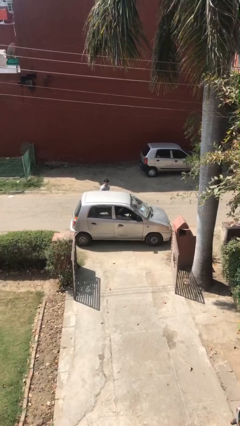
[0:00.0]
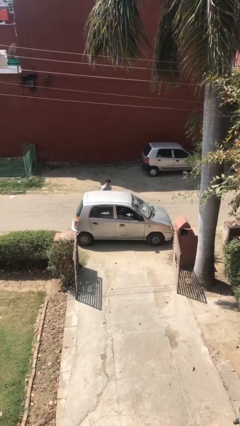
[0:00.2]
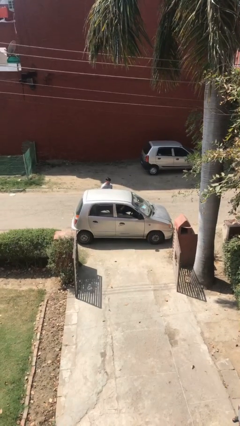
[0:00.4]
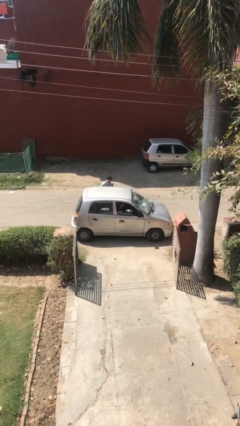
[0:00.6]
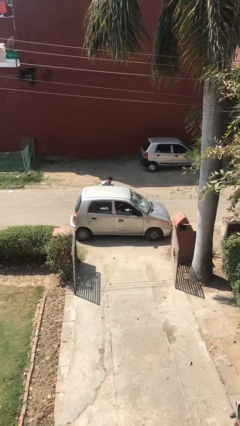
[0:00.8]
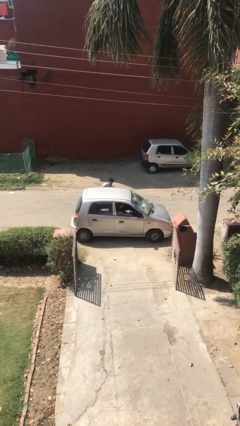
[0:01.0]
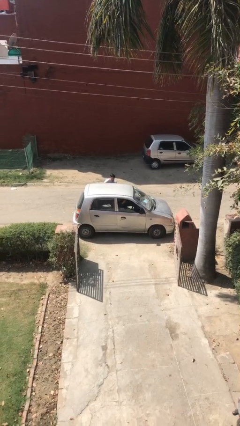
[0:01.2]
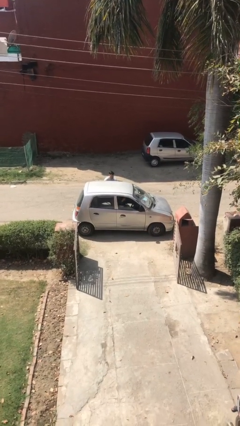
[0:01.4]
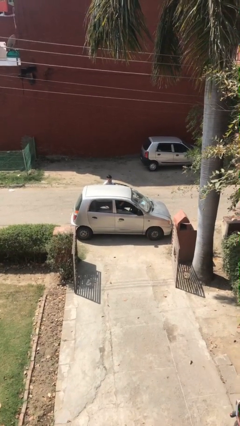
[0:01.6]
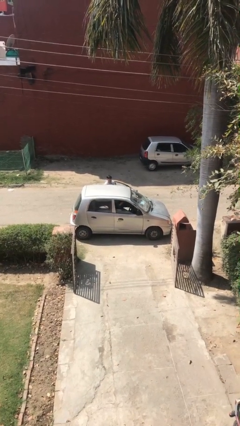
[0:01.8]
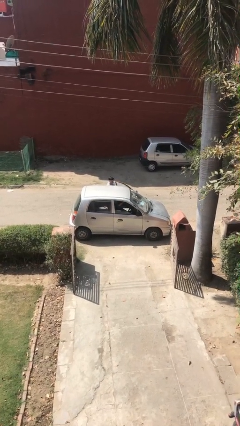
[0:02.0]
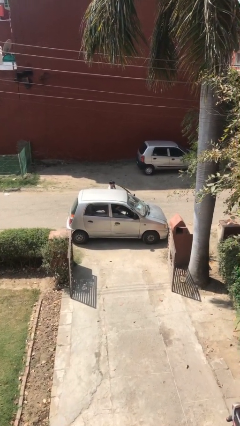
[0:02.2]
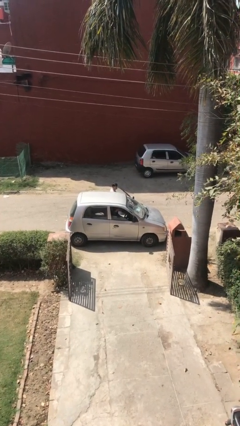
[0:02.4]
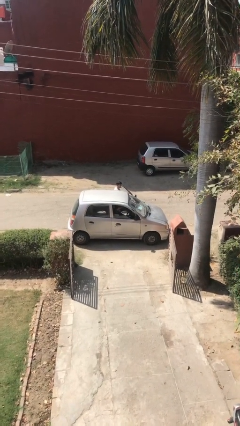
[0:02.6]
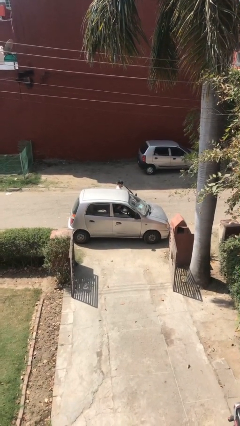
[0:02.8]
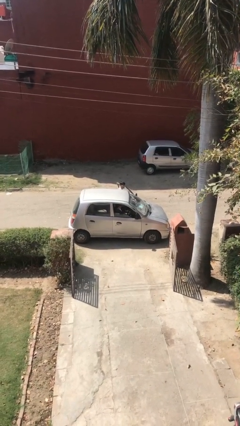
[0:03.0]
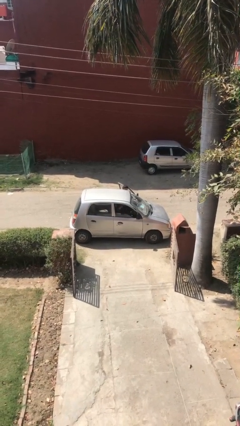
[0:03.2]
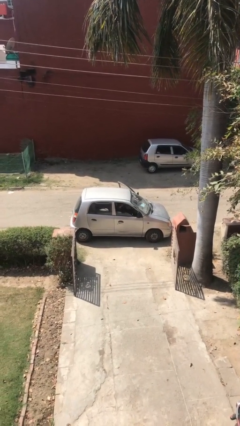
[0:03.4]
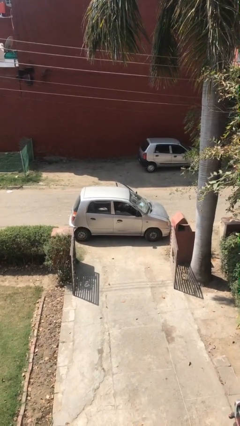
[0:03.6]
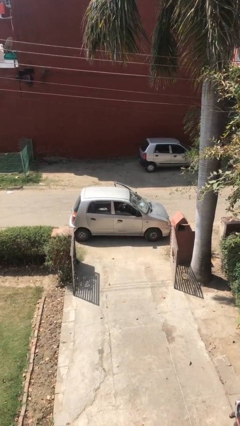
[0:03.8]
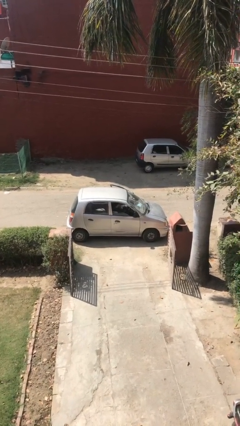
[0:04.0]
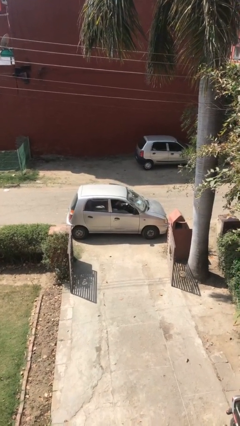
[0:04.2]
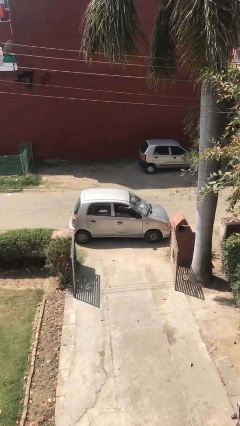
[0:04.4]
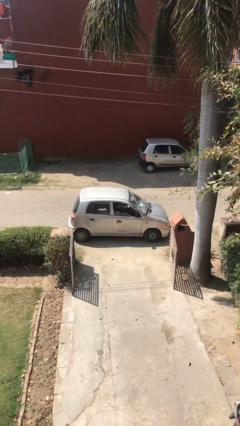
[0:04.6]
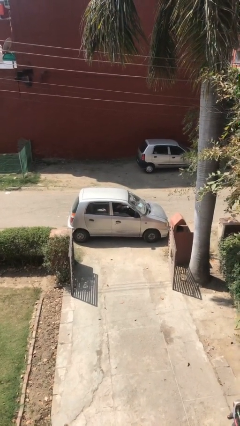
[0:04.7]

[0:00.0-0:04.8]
car picks up person

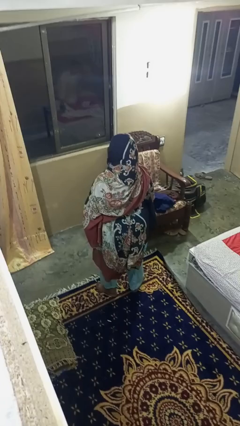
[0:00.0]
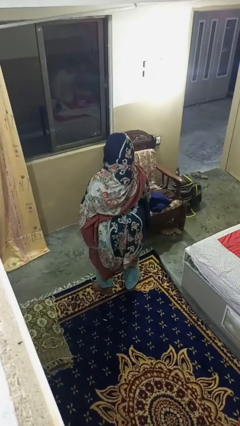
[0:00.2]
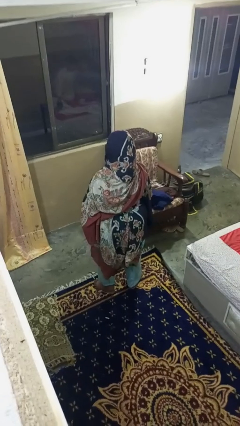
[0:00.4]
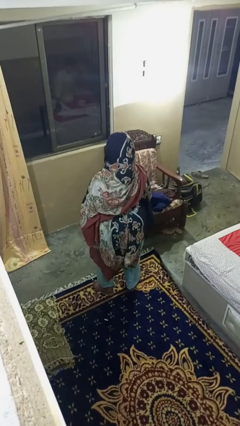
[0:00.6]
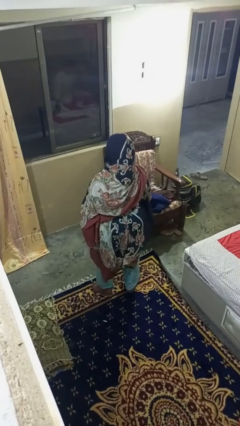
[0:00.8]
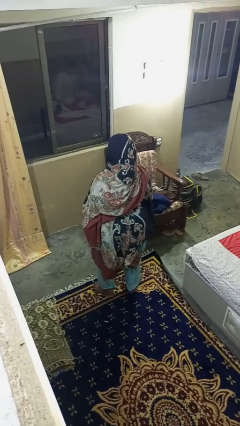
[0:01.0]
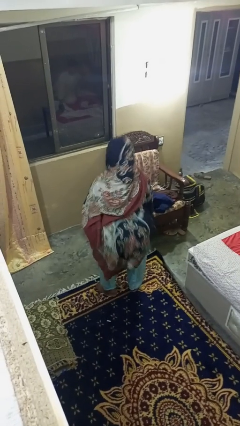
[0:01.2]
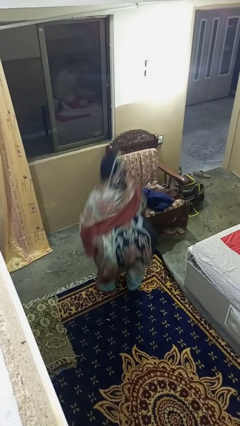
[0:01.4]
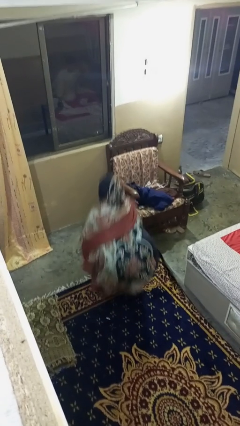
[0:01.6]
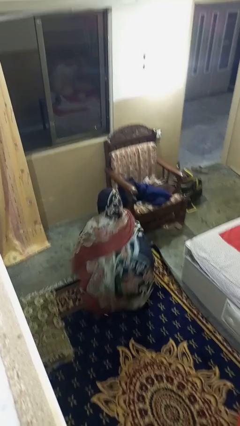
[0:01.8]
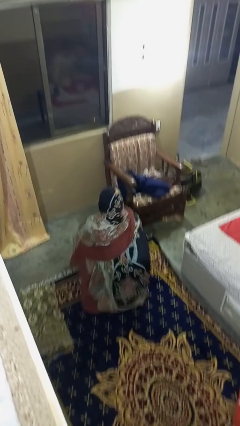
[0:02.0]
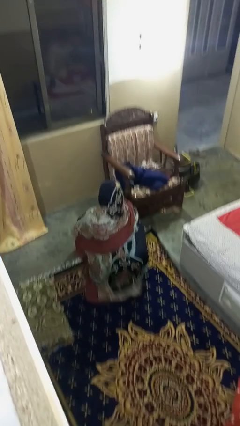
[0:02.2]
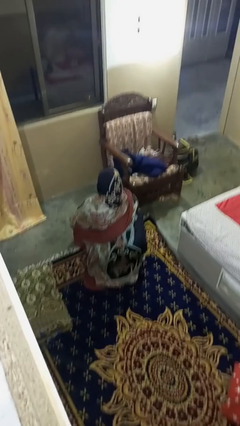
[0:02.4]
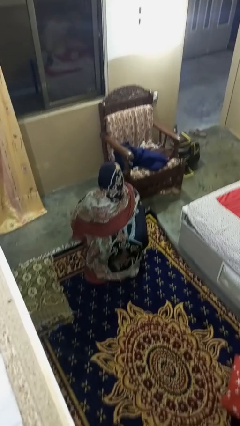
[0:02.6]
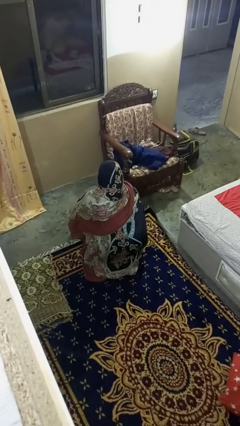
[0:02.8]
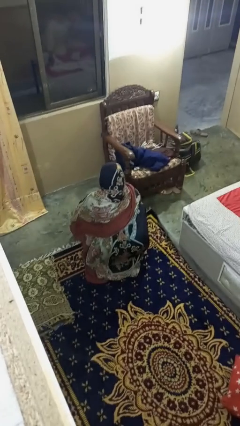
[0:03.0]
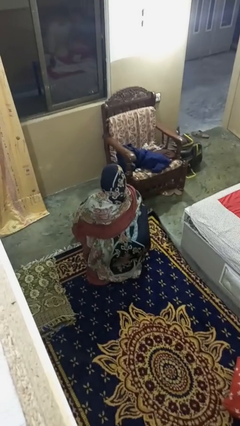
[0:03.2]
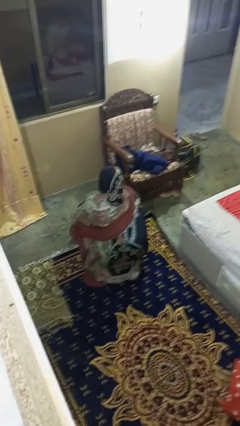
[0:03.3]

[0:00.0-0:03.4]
person squats

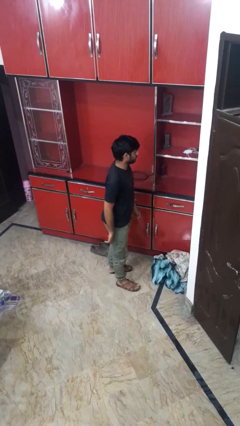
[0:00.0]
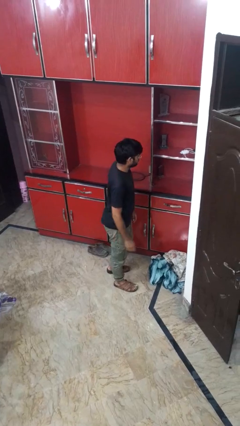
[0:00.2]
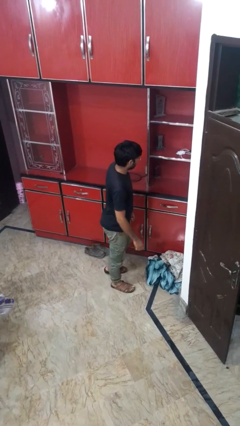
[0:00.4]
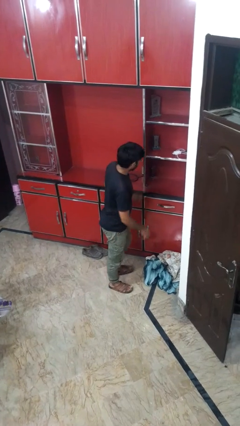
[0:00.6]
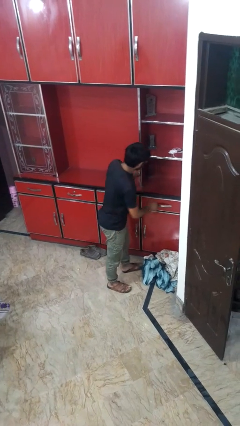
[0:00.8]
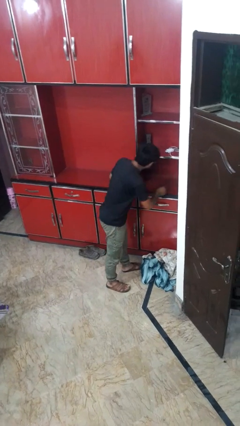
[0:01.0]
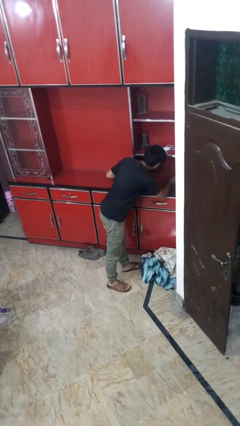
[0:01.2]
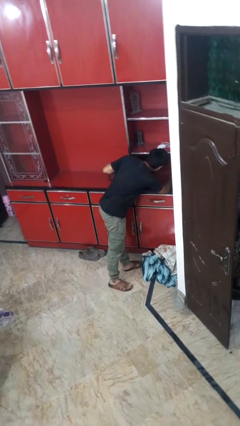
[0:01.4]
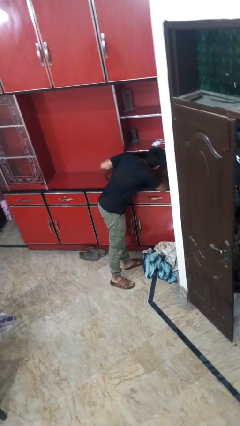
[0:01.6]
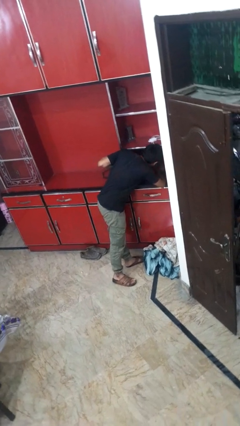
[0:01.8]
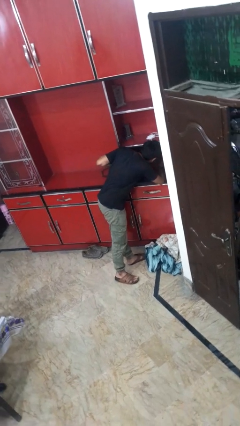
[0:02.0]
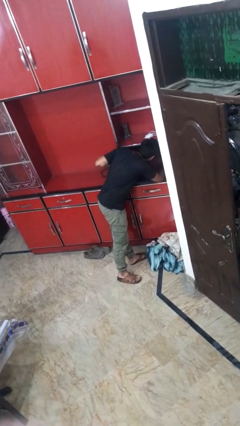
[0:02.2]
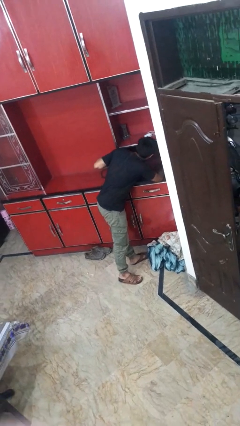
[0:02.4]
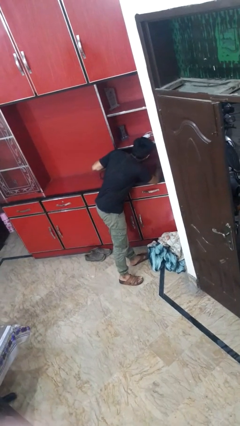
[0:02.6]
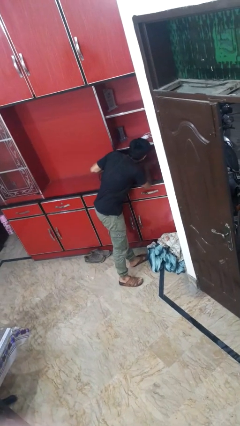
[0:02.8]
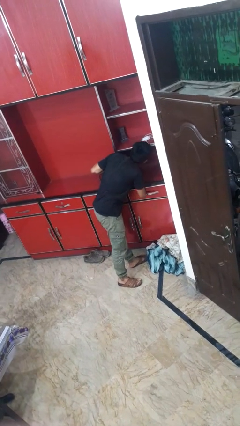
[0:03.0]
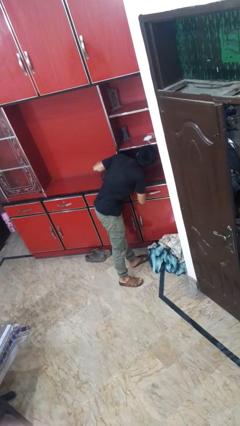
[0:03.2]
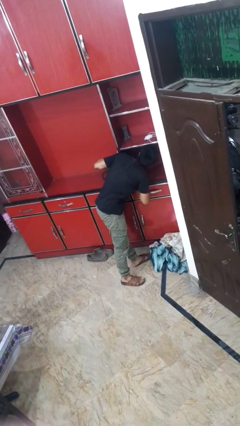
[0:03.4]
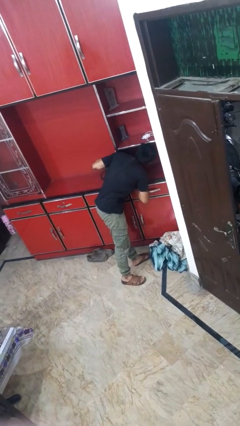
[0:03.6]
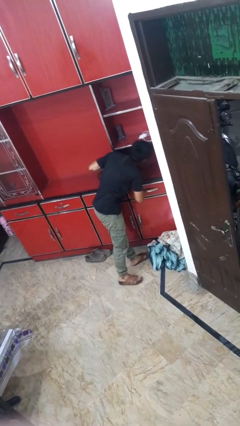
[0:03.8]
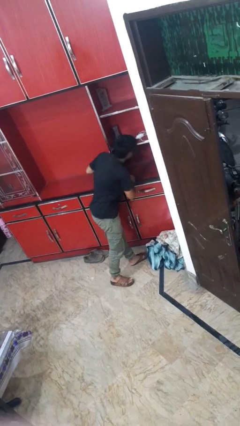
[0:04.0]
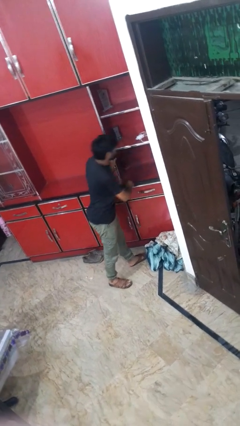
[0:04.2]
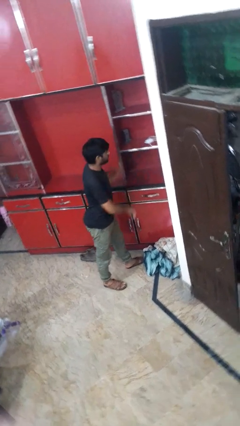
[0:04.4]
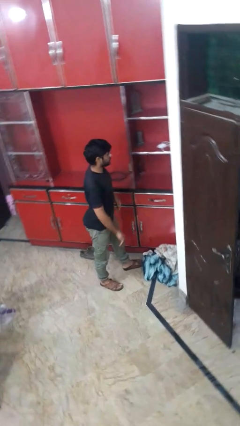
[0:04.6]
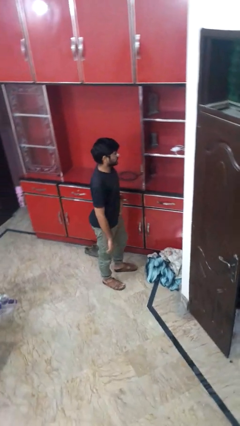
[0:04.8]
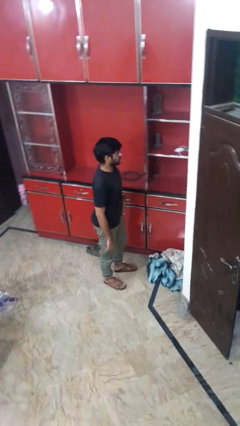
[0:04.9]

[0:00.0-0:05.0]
person searches in cabinet

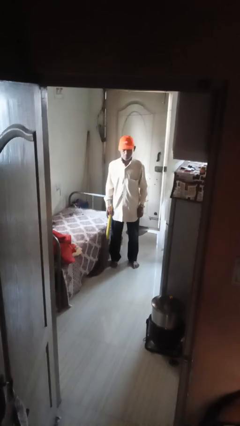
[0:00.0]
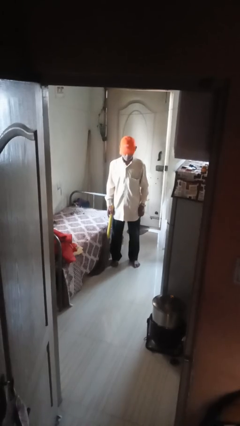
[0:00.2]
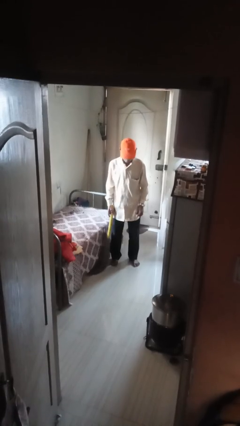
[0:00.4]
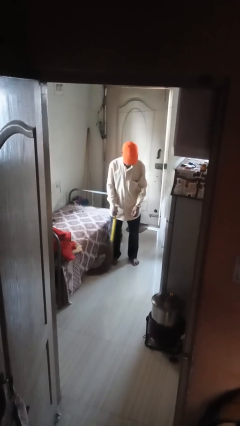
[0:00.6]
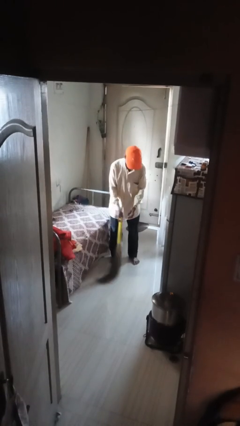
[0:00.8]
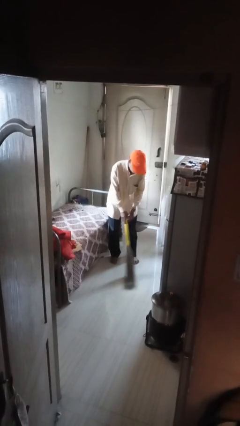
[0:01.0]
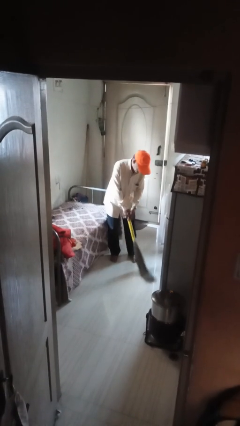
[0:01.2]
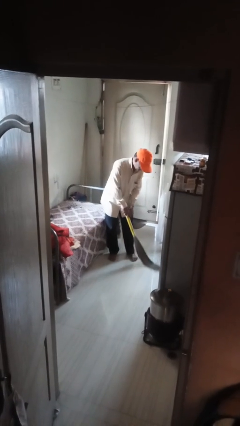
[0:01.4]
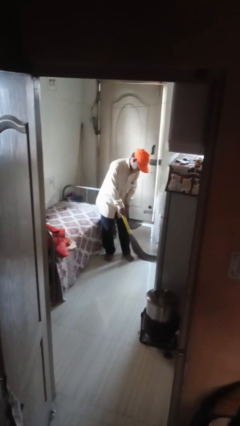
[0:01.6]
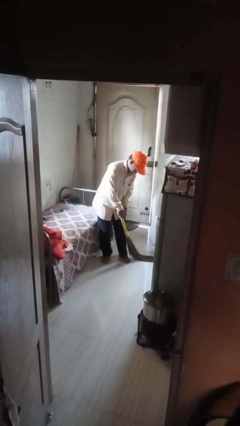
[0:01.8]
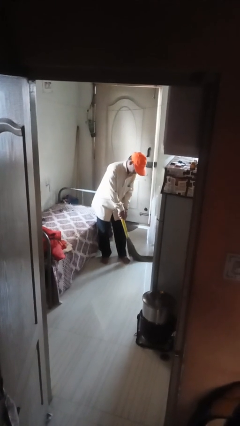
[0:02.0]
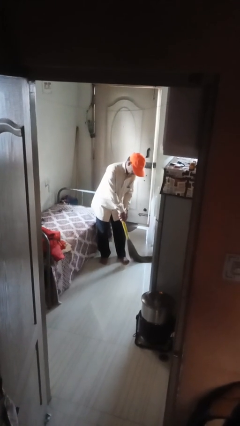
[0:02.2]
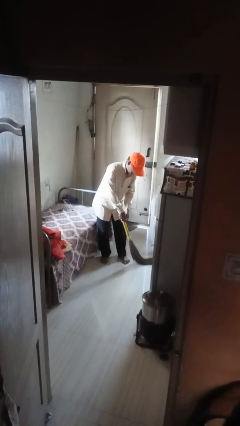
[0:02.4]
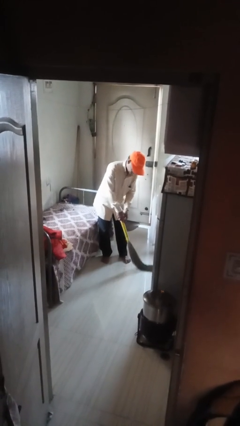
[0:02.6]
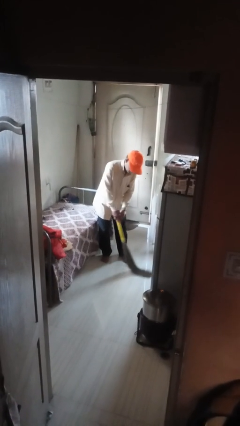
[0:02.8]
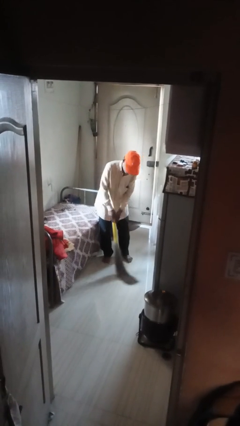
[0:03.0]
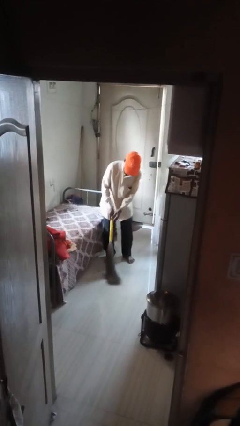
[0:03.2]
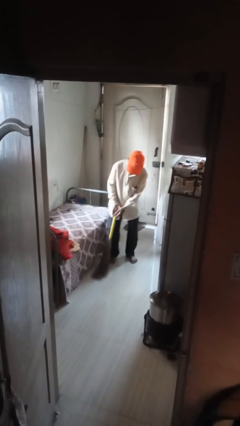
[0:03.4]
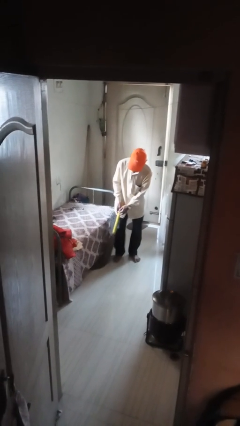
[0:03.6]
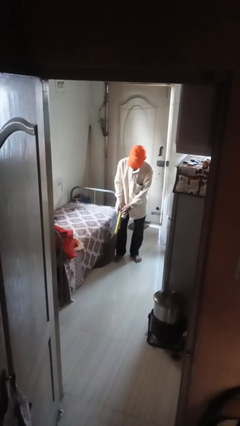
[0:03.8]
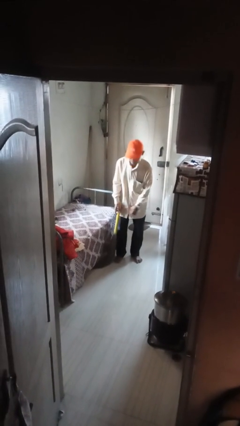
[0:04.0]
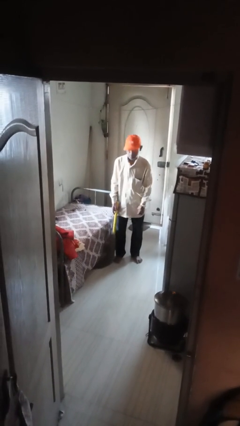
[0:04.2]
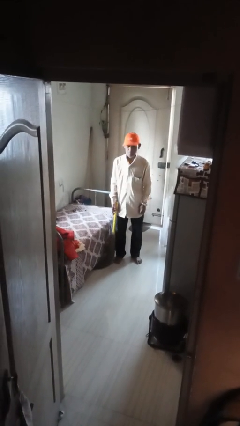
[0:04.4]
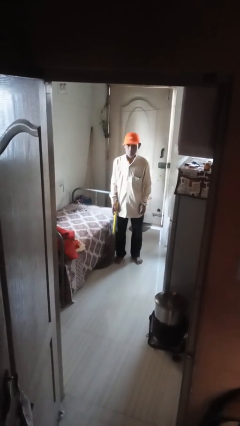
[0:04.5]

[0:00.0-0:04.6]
person sweeps floor
